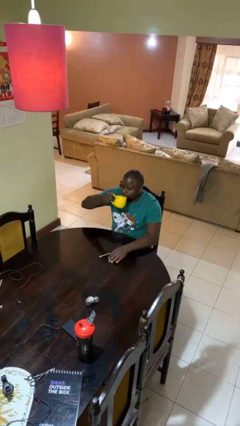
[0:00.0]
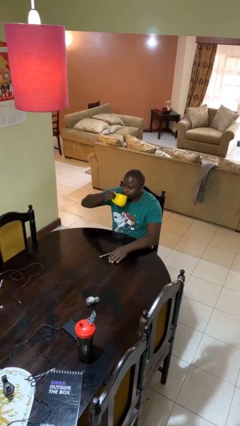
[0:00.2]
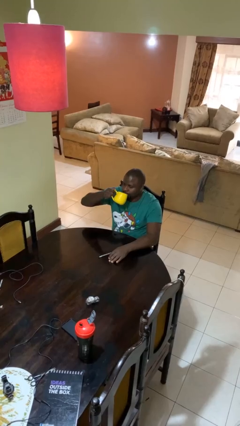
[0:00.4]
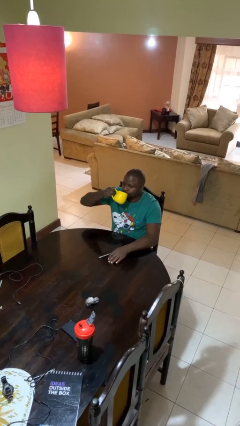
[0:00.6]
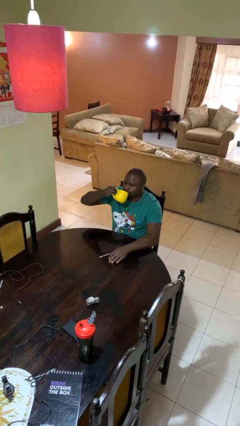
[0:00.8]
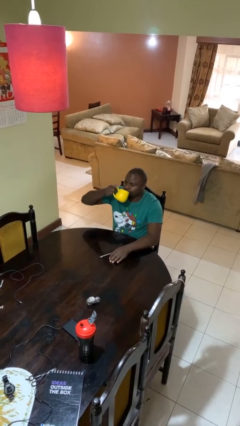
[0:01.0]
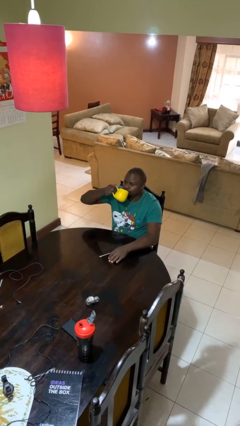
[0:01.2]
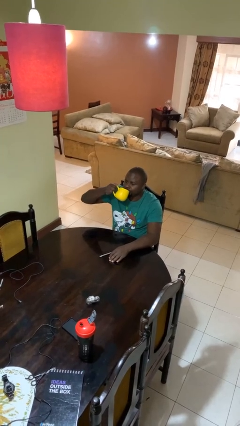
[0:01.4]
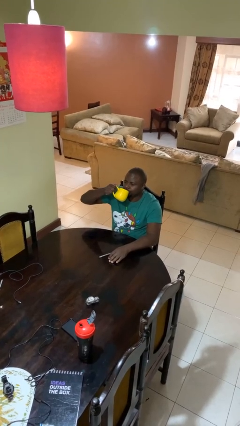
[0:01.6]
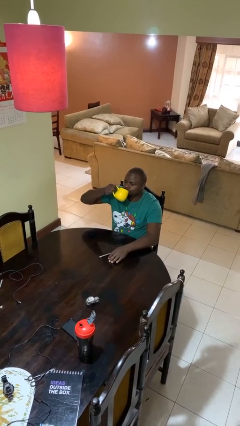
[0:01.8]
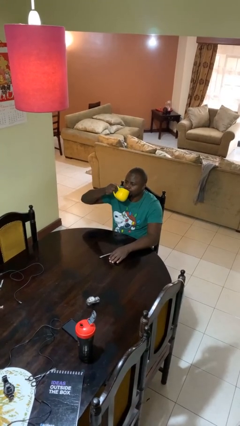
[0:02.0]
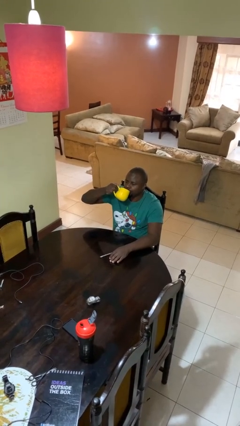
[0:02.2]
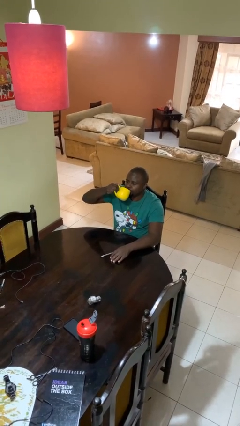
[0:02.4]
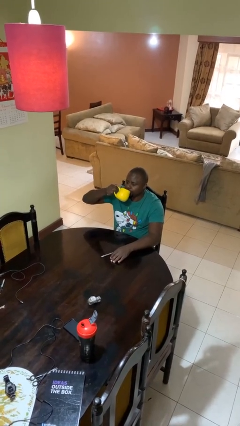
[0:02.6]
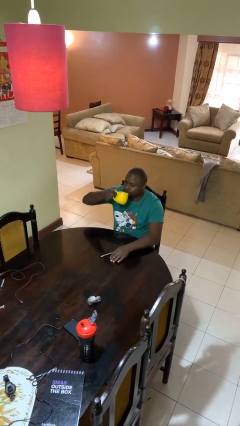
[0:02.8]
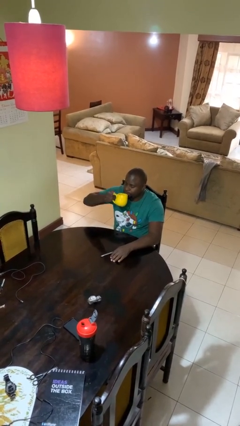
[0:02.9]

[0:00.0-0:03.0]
person drinks from mug

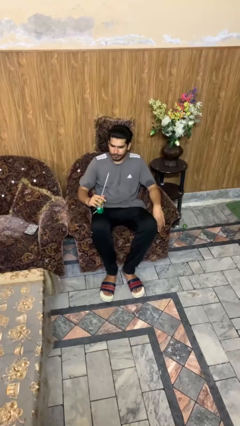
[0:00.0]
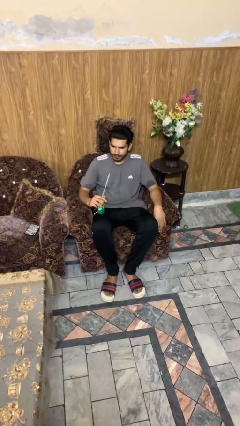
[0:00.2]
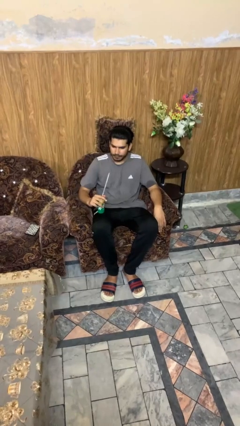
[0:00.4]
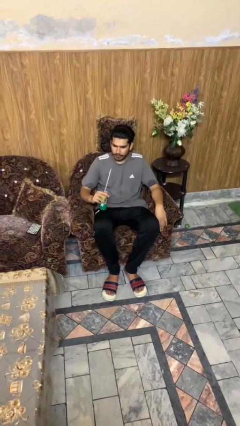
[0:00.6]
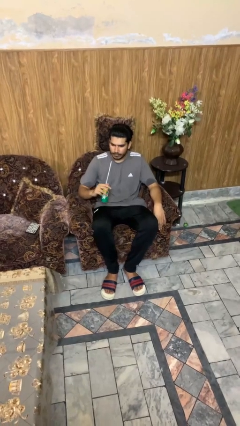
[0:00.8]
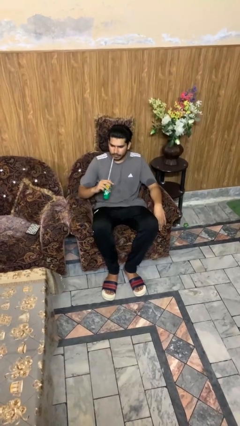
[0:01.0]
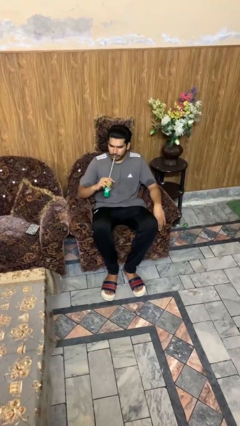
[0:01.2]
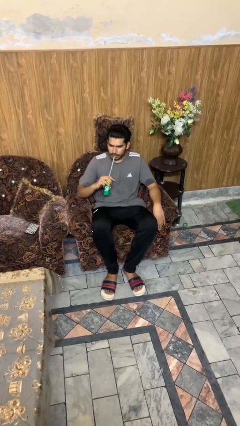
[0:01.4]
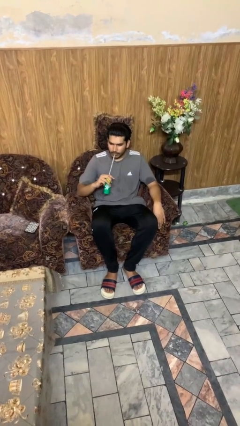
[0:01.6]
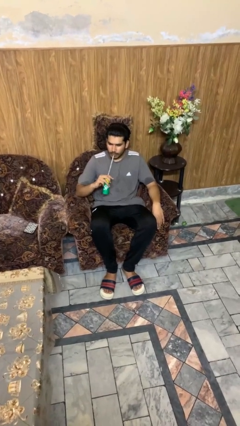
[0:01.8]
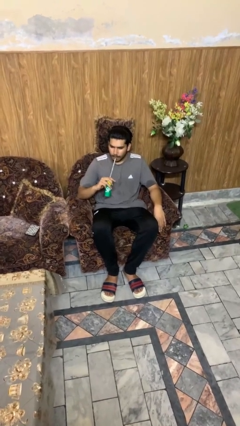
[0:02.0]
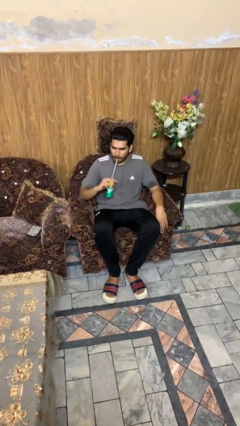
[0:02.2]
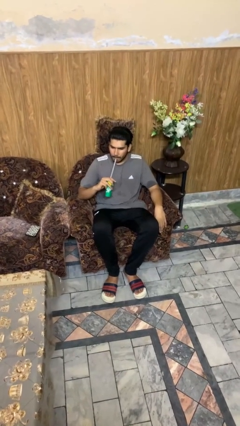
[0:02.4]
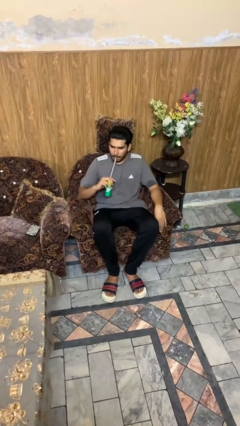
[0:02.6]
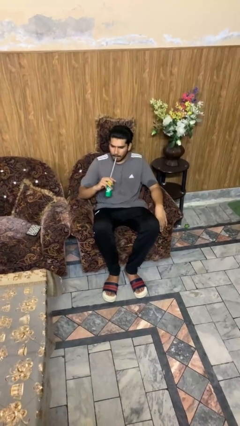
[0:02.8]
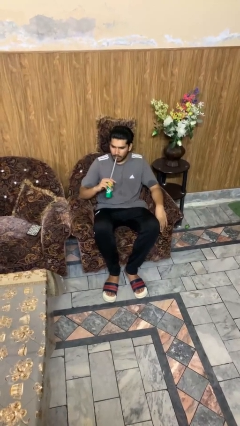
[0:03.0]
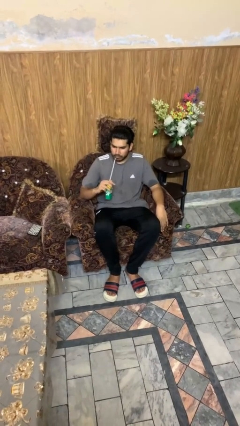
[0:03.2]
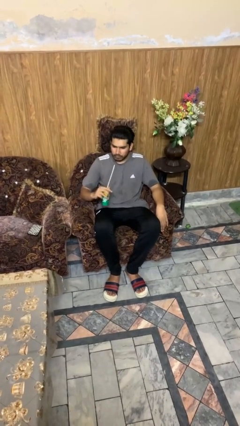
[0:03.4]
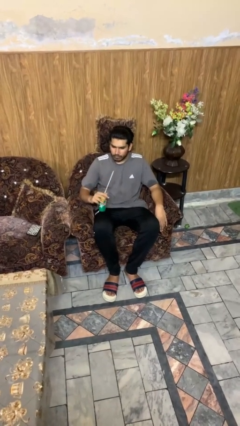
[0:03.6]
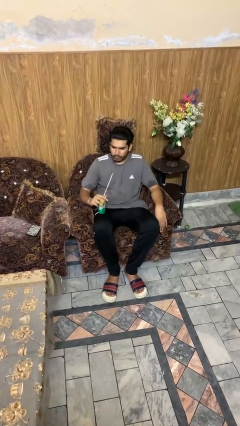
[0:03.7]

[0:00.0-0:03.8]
person drinks from straw

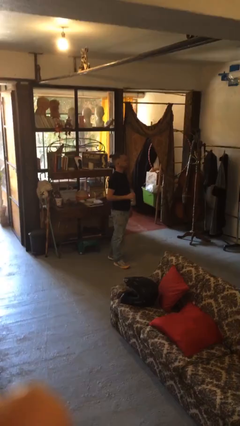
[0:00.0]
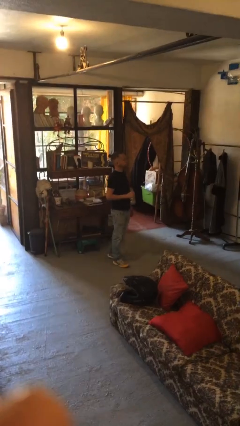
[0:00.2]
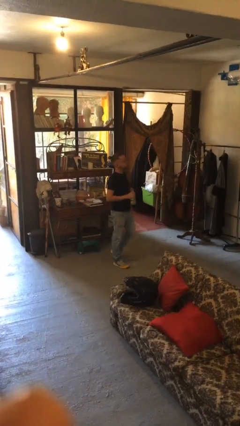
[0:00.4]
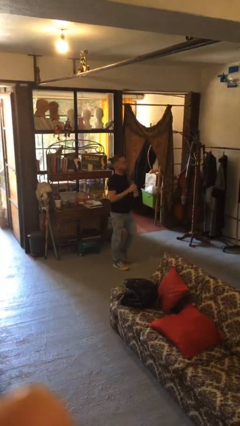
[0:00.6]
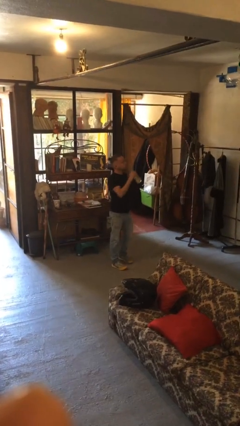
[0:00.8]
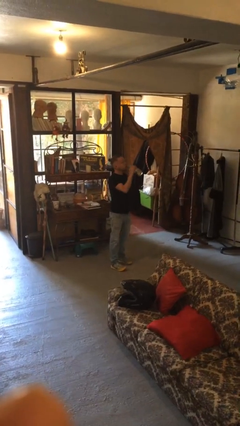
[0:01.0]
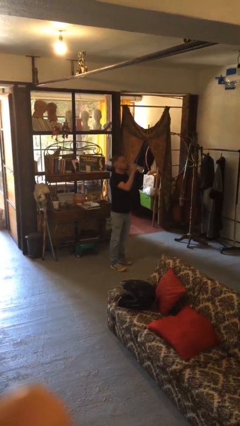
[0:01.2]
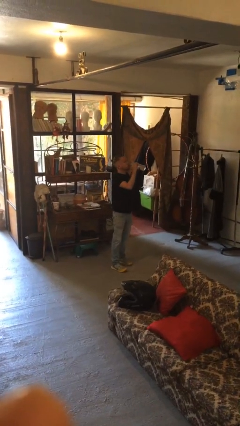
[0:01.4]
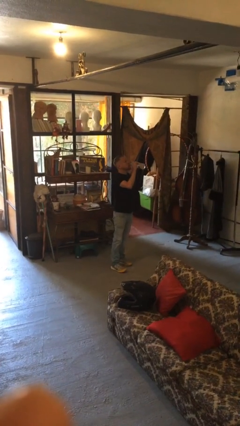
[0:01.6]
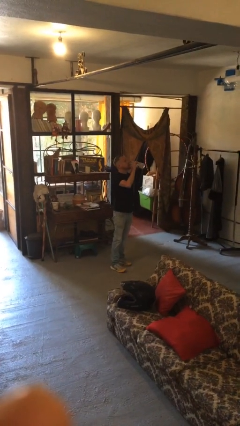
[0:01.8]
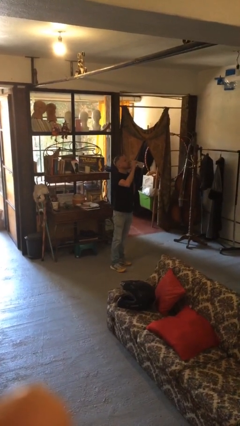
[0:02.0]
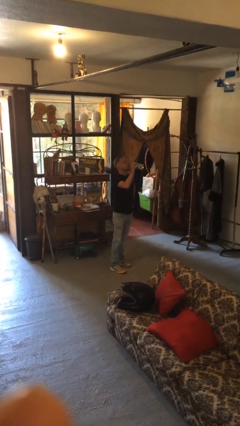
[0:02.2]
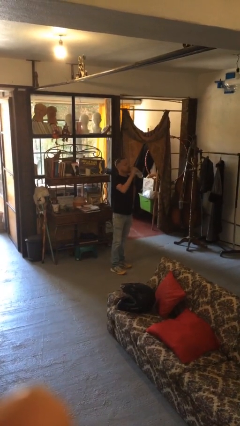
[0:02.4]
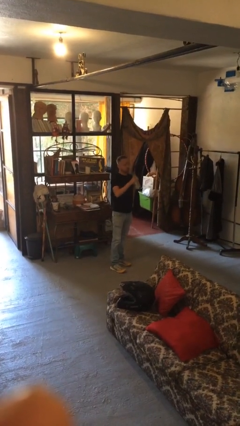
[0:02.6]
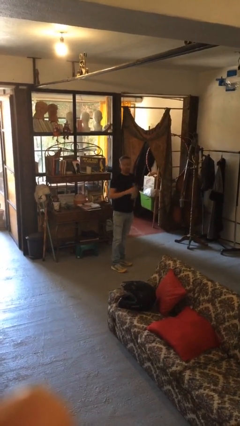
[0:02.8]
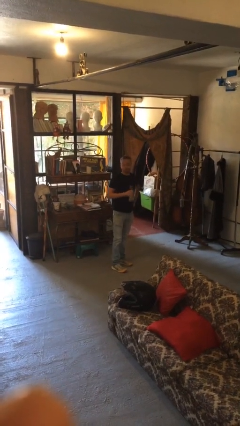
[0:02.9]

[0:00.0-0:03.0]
person drinks from bottle

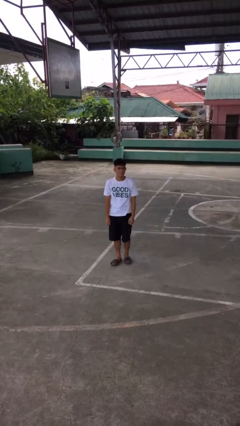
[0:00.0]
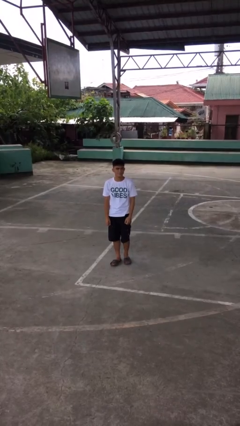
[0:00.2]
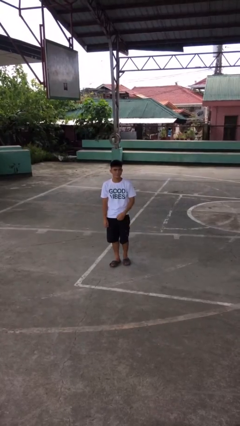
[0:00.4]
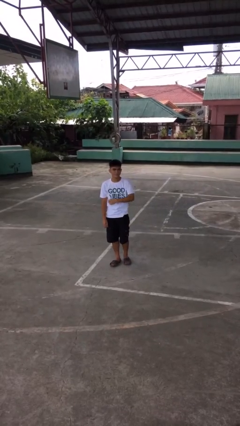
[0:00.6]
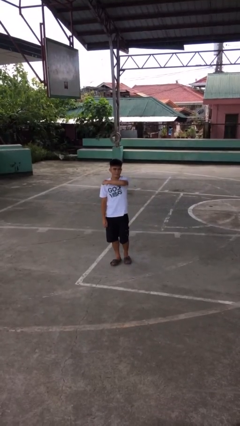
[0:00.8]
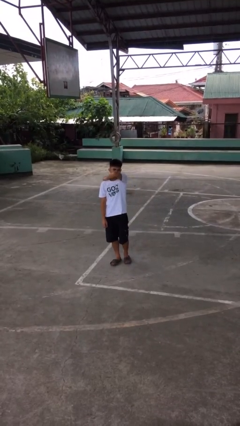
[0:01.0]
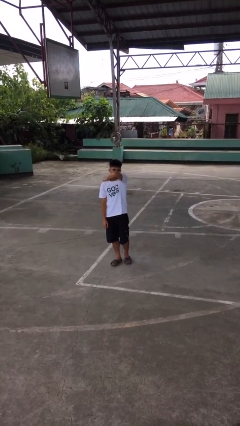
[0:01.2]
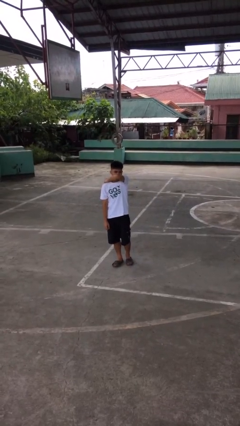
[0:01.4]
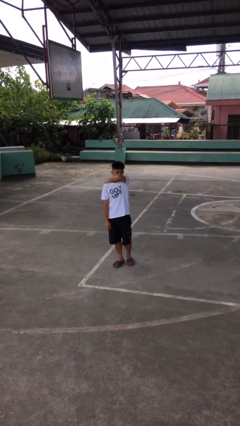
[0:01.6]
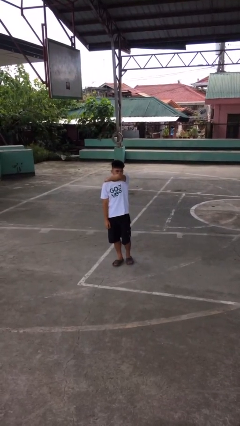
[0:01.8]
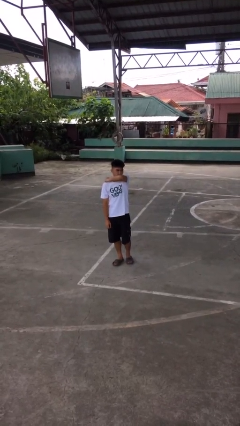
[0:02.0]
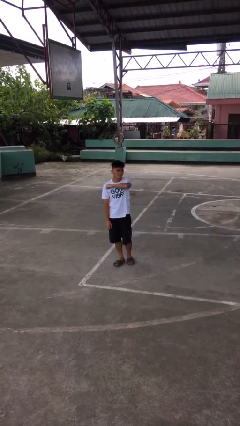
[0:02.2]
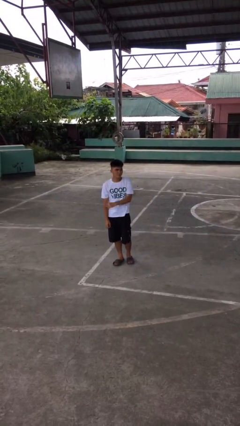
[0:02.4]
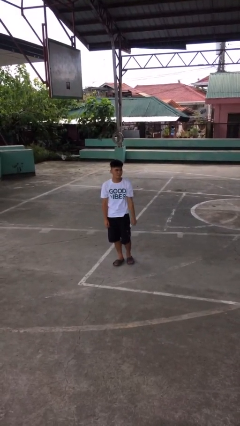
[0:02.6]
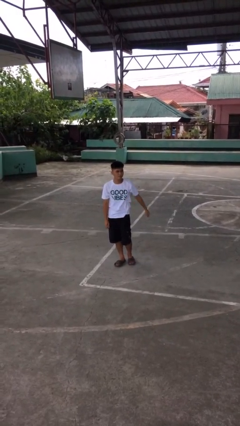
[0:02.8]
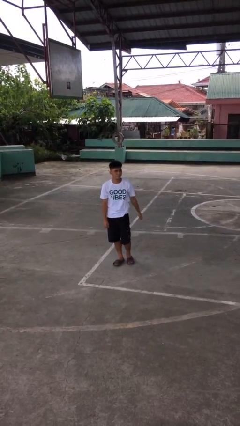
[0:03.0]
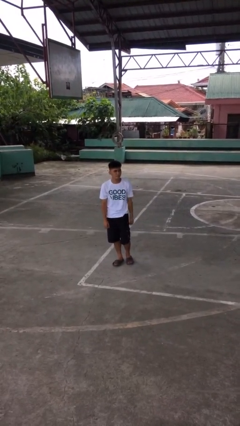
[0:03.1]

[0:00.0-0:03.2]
person sneezes into arm

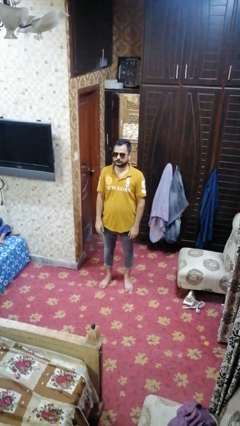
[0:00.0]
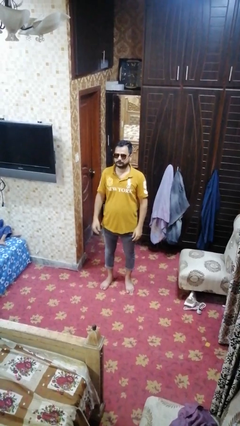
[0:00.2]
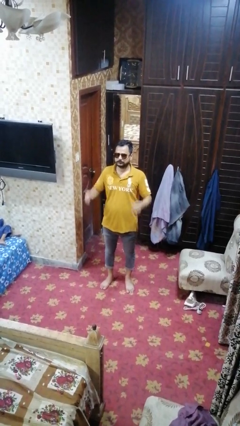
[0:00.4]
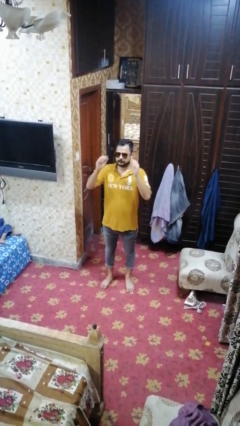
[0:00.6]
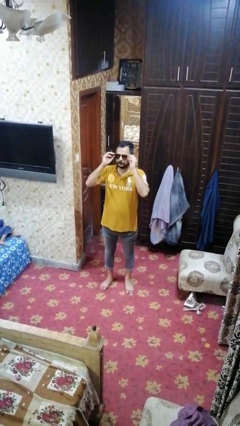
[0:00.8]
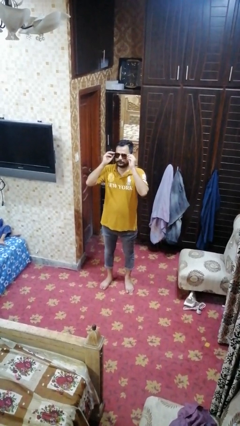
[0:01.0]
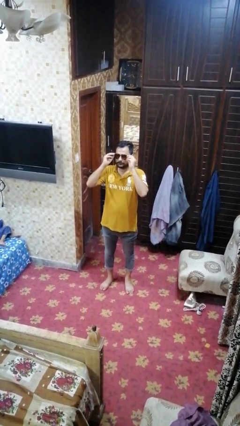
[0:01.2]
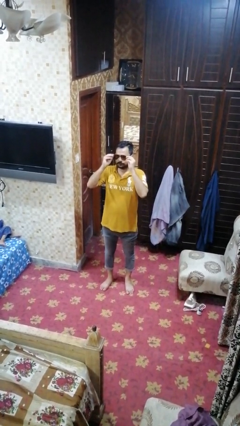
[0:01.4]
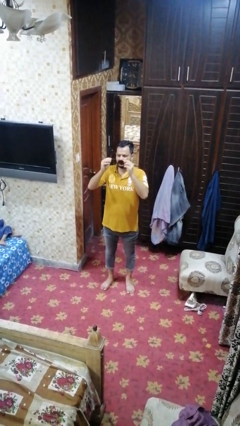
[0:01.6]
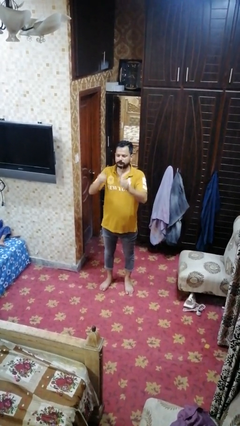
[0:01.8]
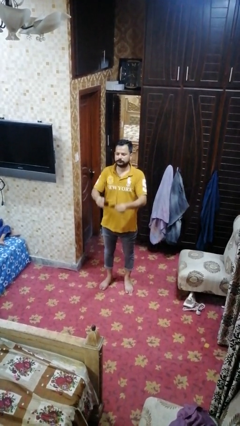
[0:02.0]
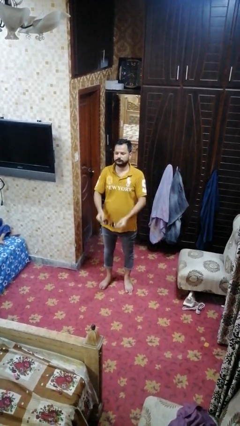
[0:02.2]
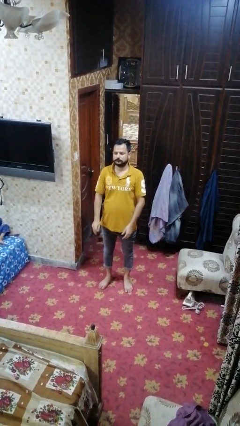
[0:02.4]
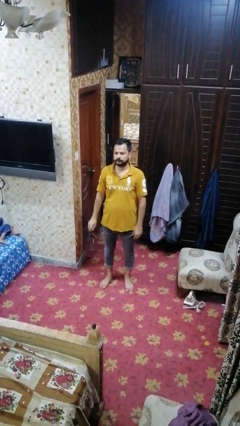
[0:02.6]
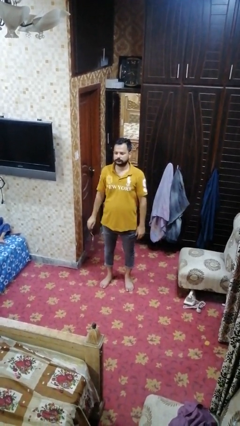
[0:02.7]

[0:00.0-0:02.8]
person takes off sunglasses

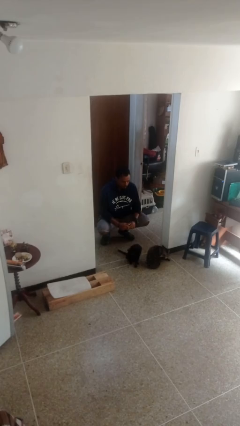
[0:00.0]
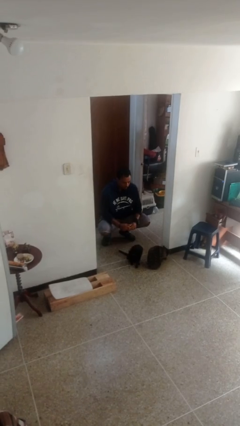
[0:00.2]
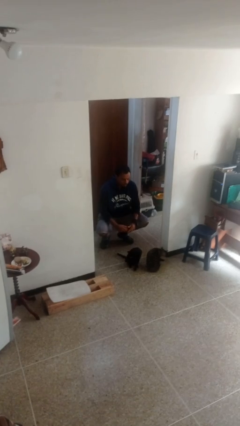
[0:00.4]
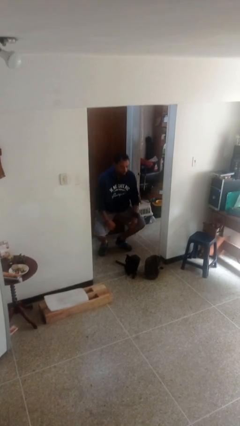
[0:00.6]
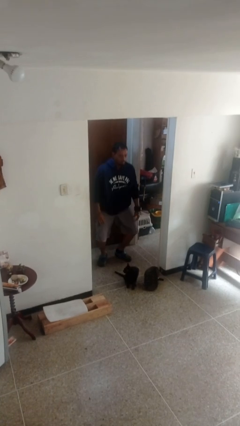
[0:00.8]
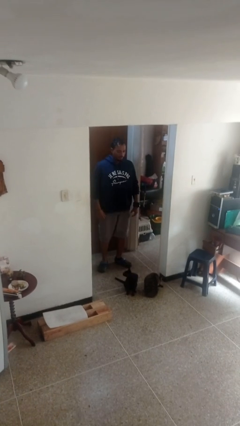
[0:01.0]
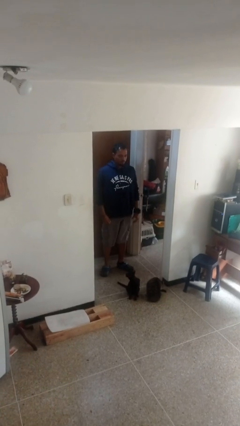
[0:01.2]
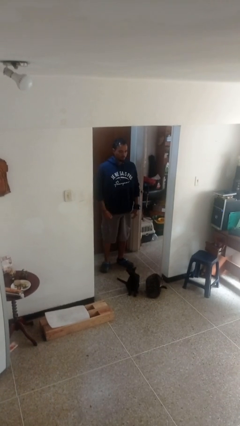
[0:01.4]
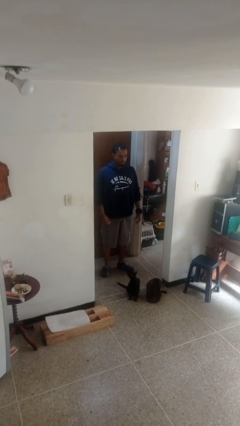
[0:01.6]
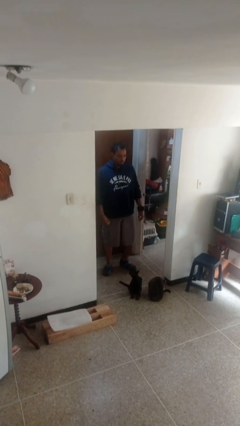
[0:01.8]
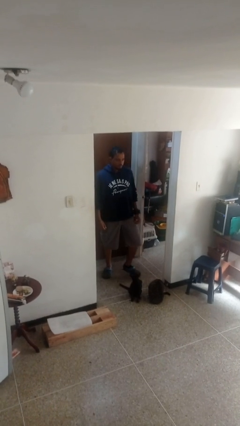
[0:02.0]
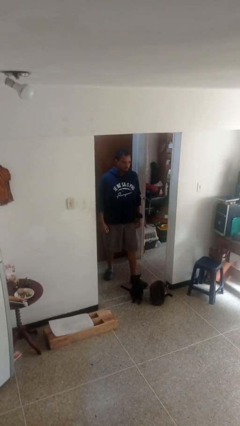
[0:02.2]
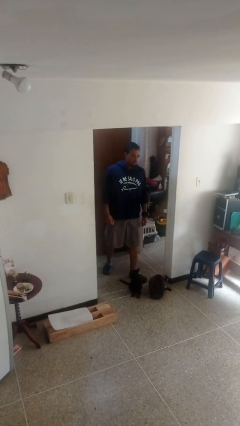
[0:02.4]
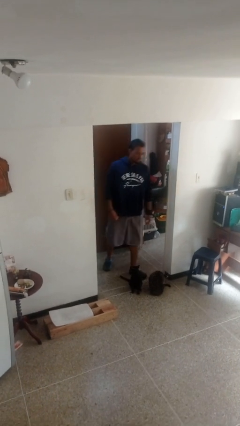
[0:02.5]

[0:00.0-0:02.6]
person stands up
